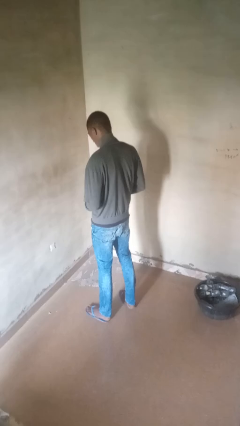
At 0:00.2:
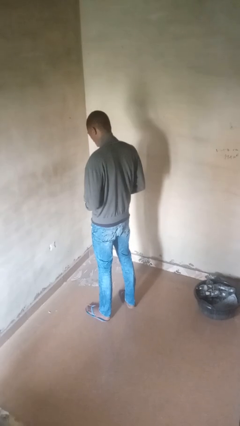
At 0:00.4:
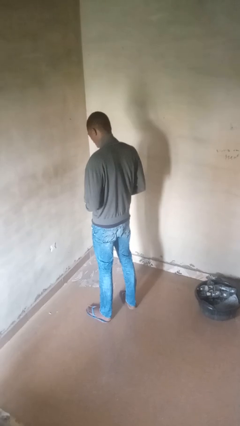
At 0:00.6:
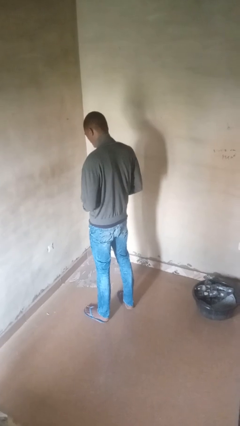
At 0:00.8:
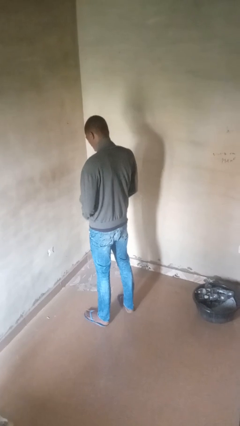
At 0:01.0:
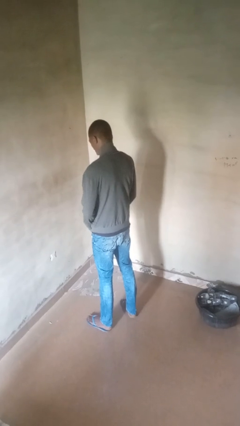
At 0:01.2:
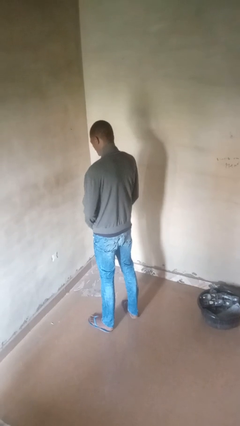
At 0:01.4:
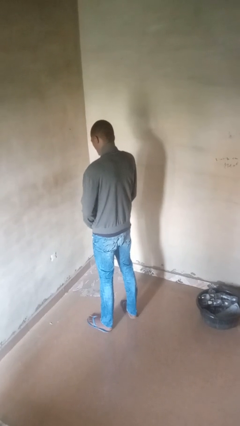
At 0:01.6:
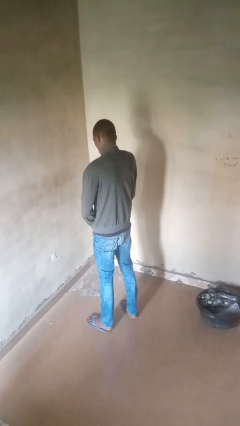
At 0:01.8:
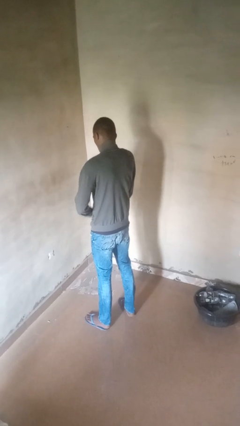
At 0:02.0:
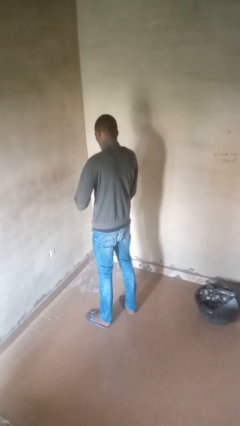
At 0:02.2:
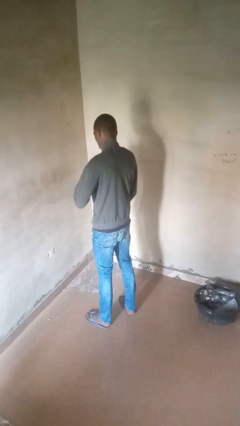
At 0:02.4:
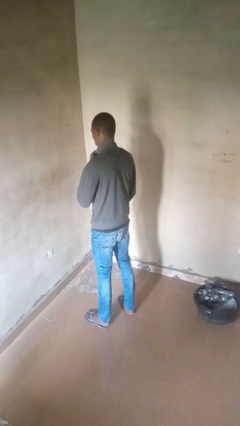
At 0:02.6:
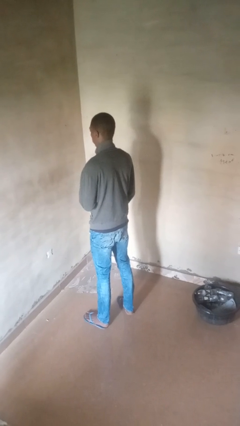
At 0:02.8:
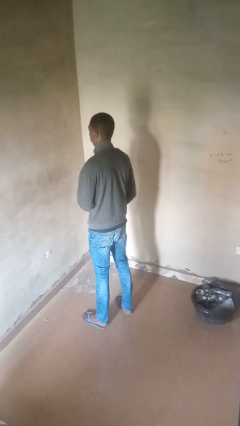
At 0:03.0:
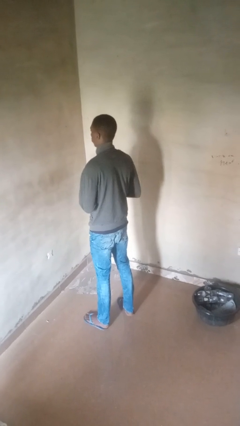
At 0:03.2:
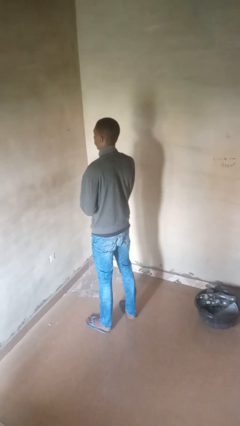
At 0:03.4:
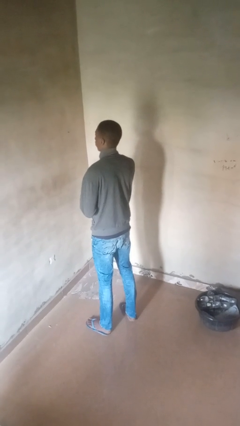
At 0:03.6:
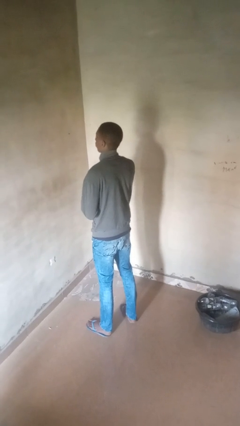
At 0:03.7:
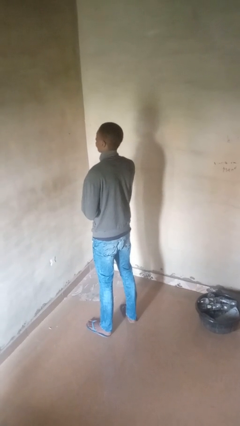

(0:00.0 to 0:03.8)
person zips up jacket

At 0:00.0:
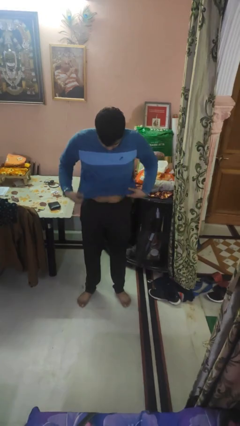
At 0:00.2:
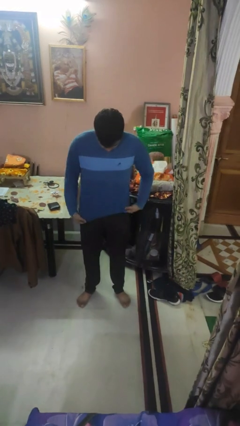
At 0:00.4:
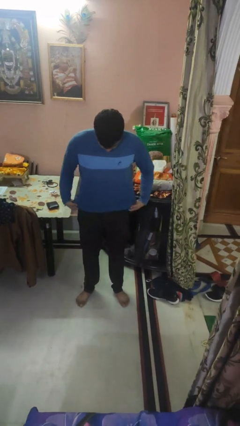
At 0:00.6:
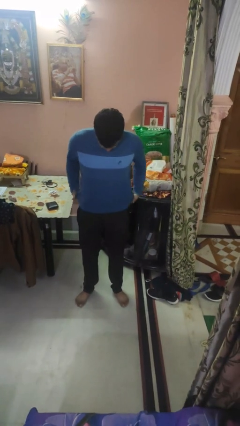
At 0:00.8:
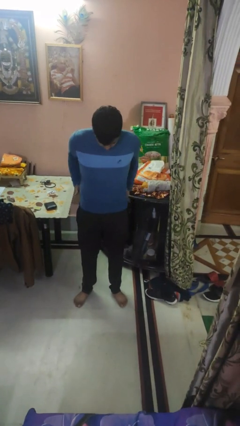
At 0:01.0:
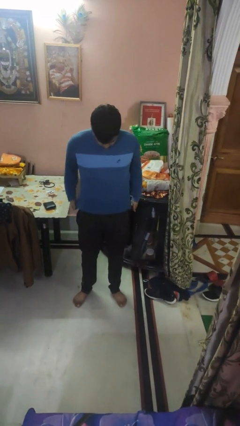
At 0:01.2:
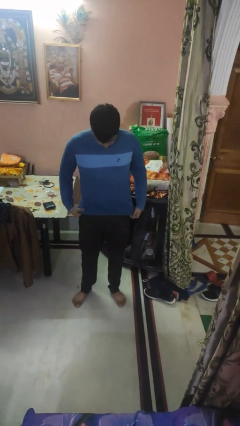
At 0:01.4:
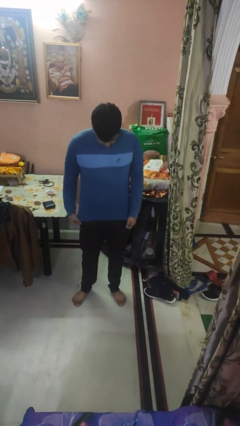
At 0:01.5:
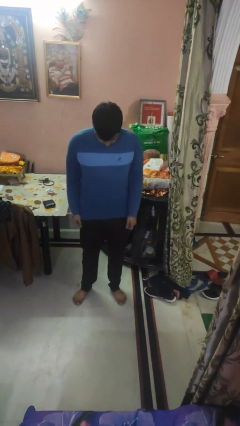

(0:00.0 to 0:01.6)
person untucks shirt

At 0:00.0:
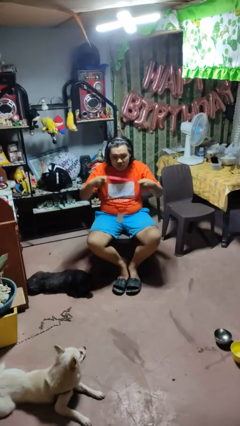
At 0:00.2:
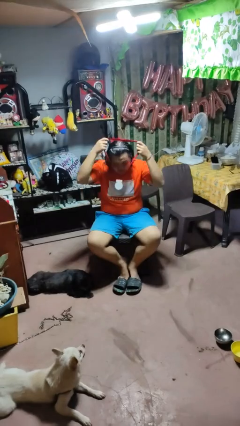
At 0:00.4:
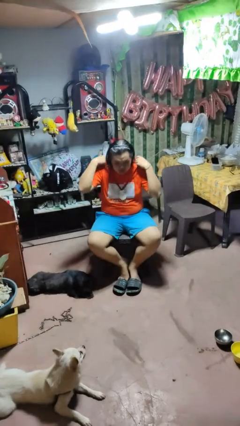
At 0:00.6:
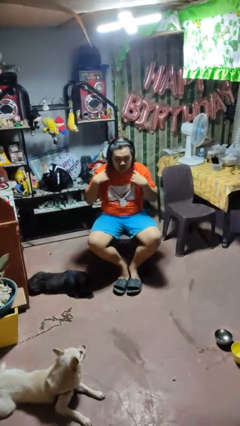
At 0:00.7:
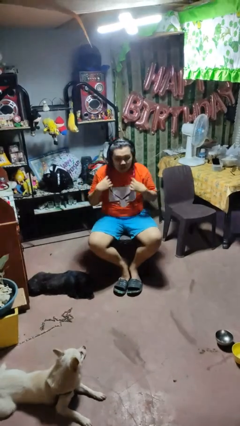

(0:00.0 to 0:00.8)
person puts on necklace

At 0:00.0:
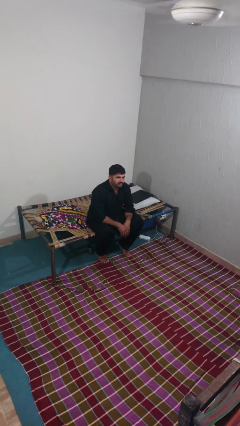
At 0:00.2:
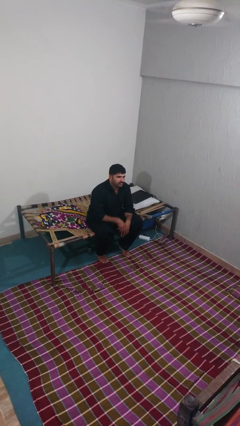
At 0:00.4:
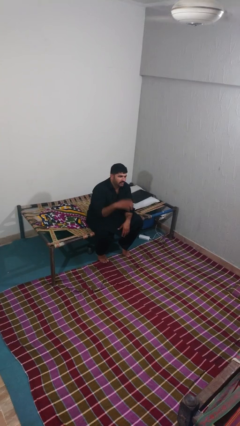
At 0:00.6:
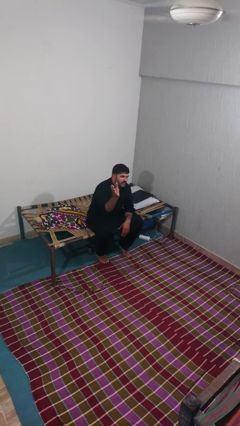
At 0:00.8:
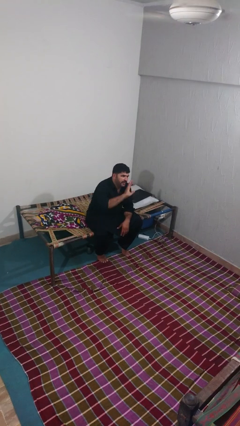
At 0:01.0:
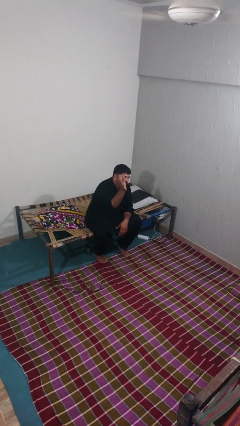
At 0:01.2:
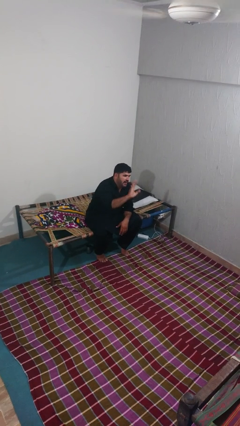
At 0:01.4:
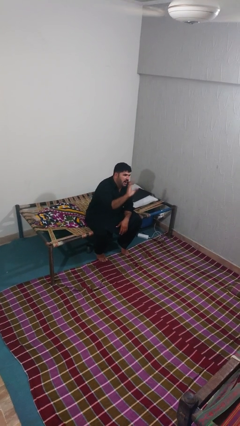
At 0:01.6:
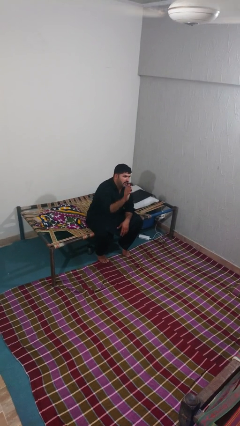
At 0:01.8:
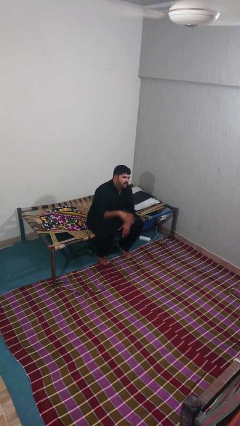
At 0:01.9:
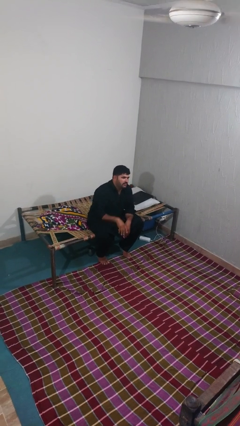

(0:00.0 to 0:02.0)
person waves at person

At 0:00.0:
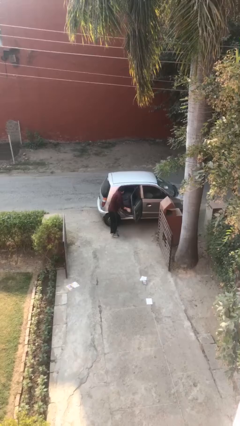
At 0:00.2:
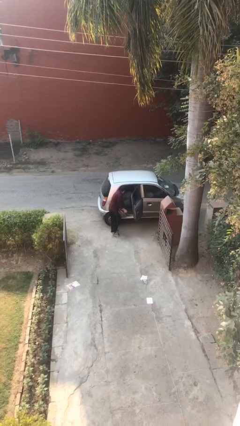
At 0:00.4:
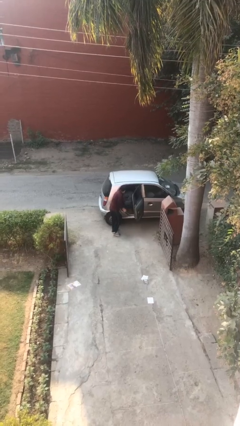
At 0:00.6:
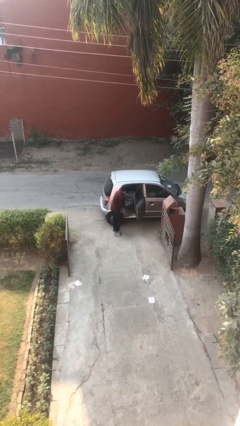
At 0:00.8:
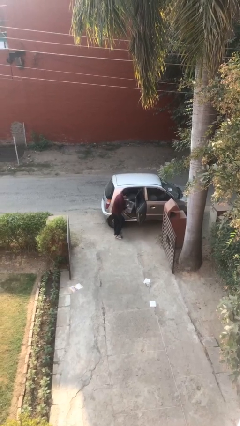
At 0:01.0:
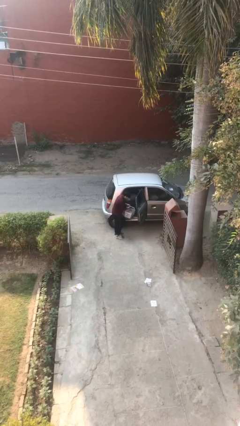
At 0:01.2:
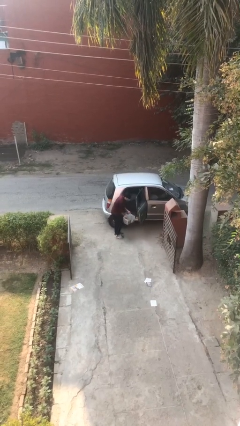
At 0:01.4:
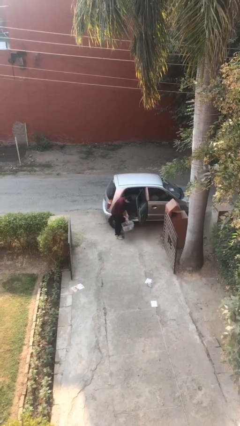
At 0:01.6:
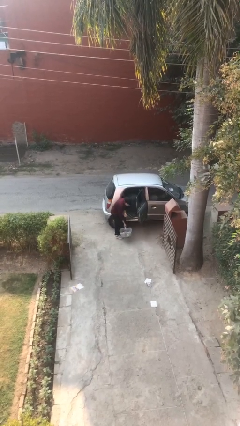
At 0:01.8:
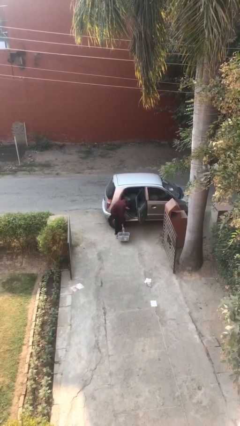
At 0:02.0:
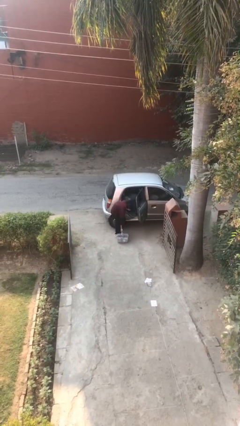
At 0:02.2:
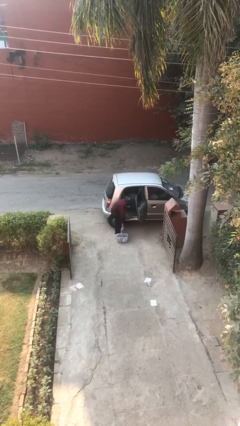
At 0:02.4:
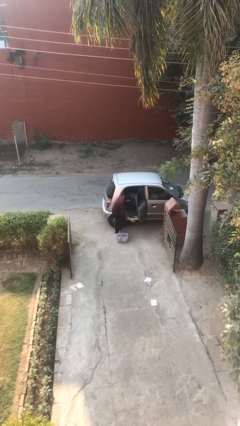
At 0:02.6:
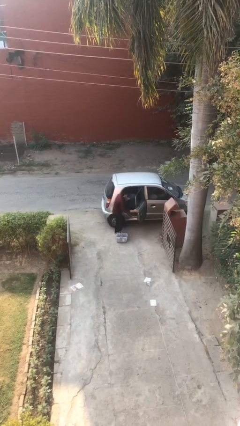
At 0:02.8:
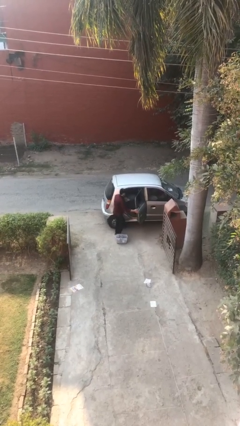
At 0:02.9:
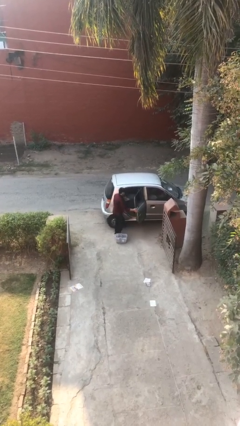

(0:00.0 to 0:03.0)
person unloads car

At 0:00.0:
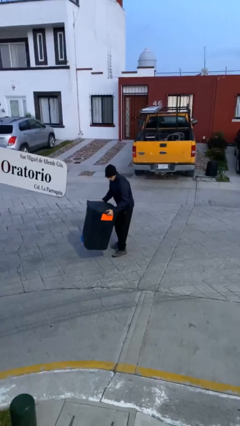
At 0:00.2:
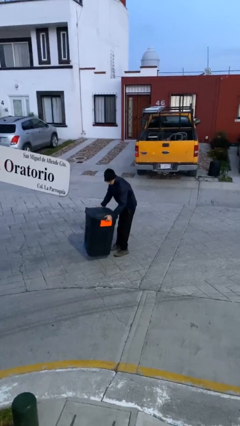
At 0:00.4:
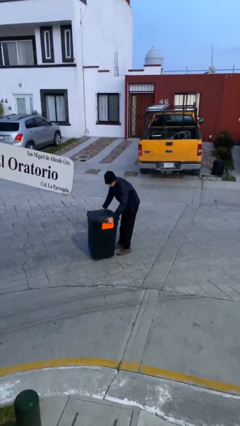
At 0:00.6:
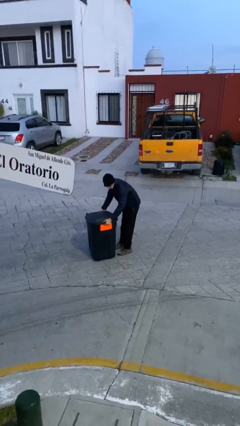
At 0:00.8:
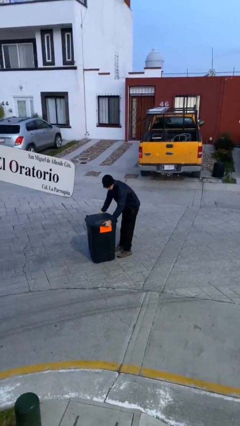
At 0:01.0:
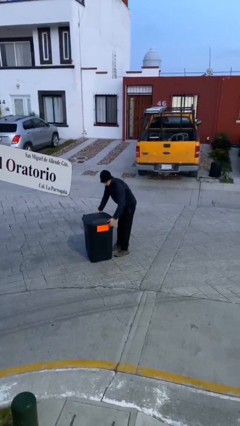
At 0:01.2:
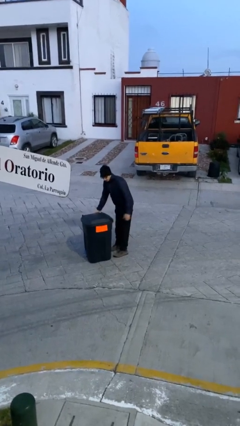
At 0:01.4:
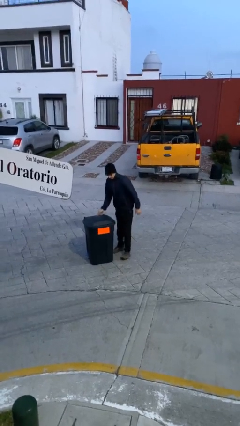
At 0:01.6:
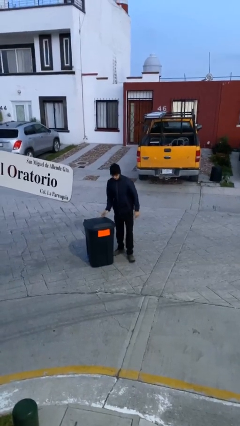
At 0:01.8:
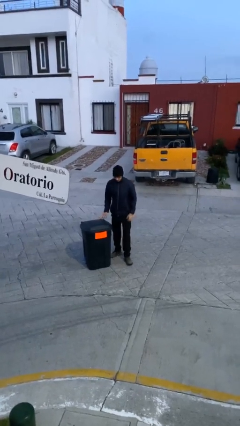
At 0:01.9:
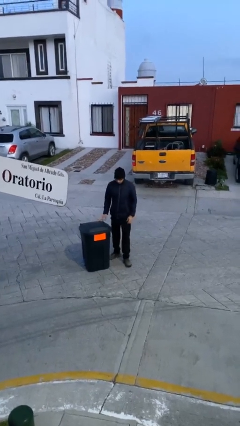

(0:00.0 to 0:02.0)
person puts down object on floor

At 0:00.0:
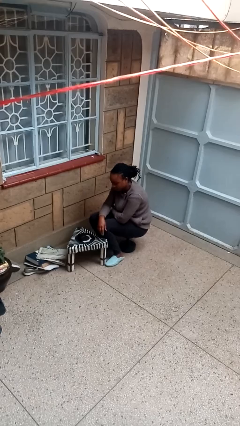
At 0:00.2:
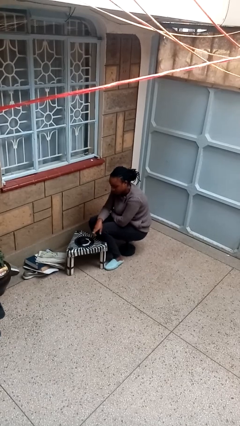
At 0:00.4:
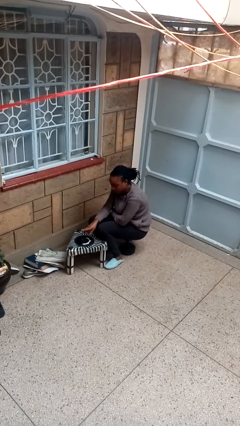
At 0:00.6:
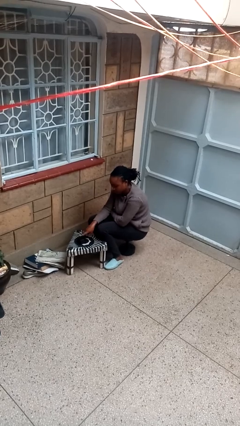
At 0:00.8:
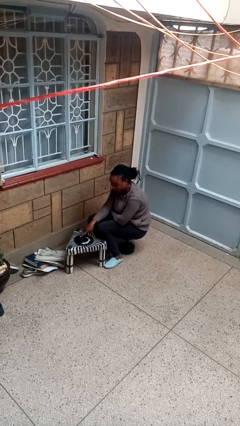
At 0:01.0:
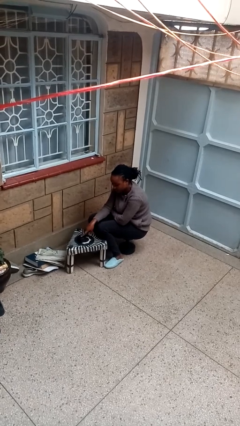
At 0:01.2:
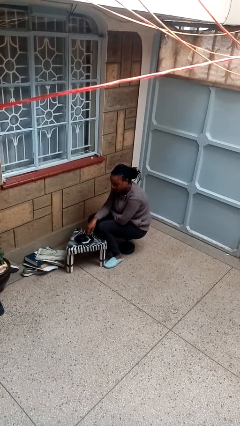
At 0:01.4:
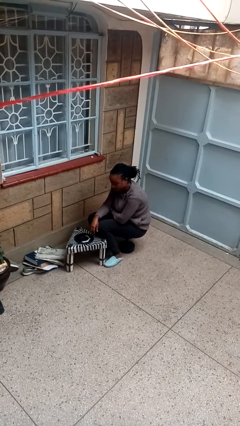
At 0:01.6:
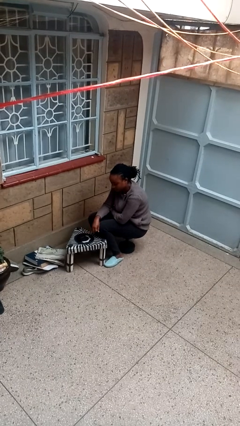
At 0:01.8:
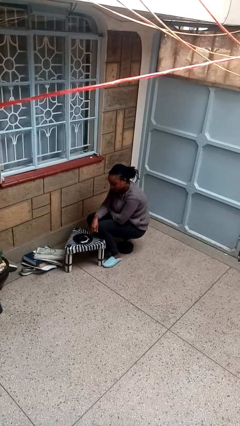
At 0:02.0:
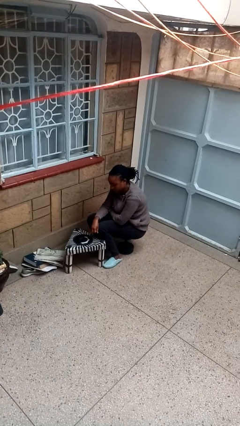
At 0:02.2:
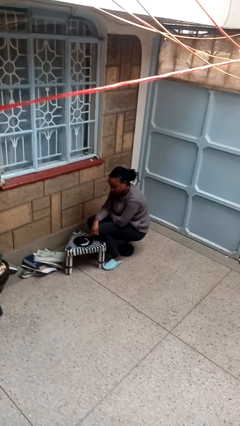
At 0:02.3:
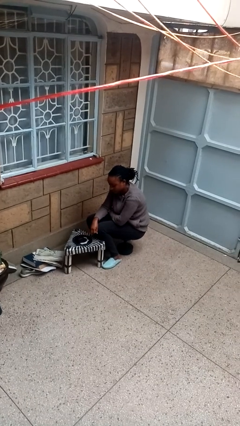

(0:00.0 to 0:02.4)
person taps object with finger

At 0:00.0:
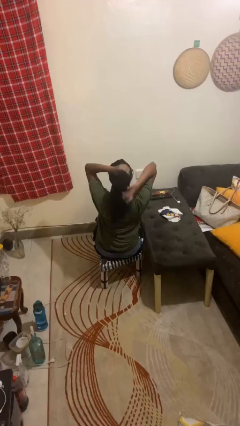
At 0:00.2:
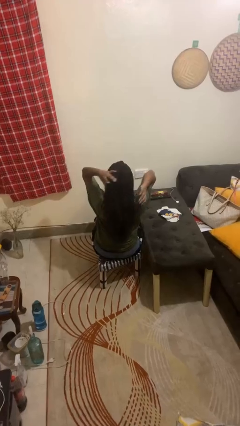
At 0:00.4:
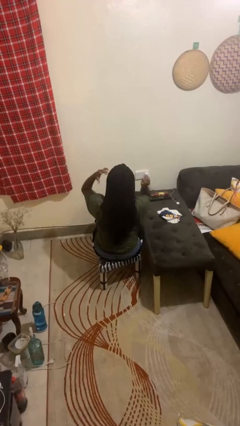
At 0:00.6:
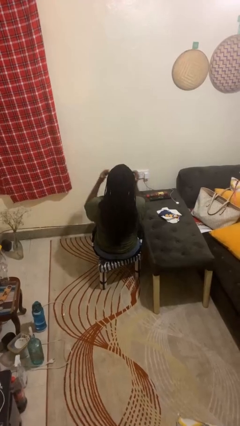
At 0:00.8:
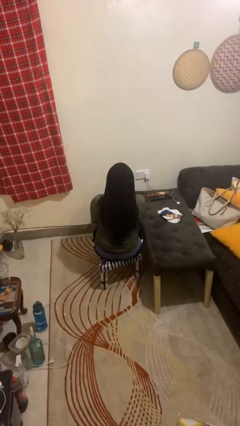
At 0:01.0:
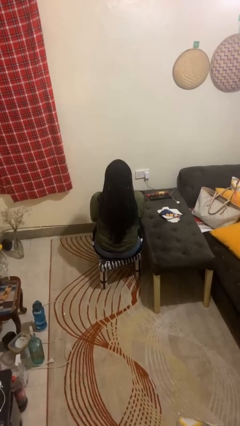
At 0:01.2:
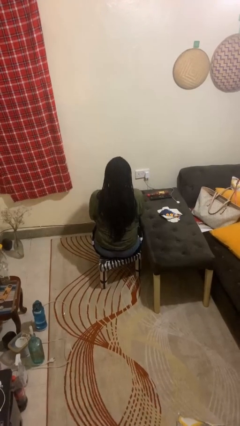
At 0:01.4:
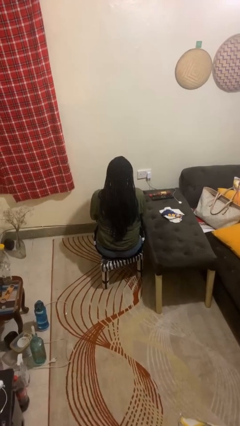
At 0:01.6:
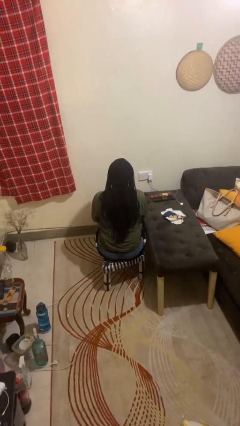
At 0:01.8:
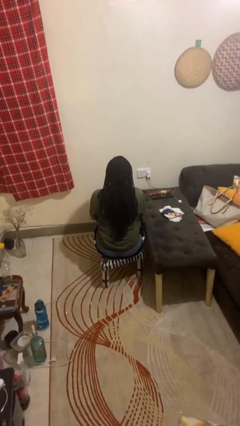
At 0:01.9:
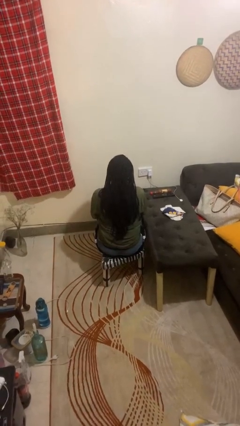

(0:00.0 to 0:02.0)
person takes off hairtie
